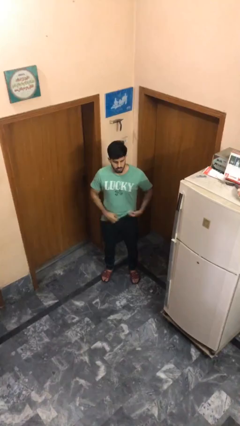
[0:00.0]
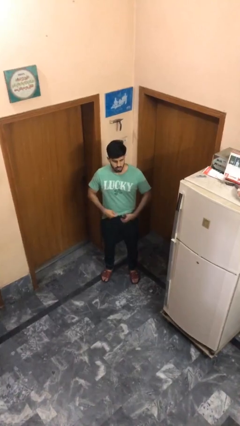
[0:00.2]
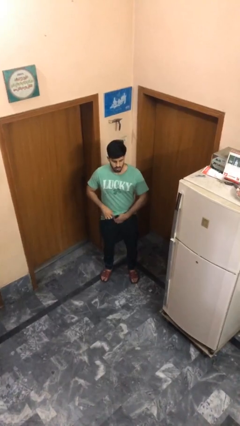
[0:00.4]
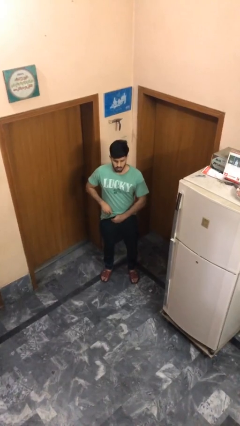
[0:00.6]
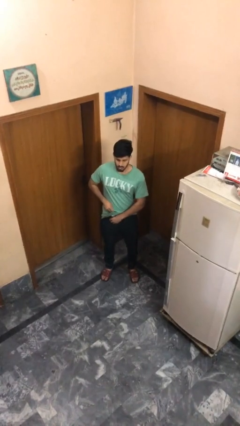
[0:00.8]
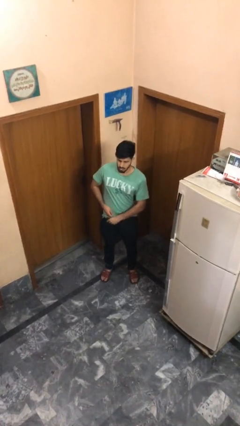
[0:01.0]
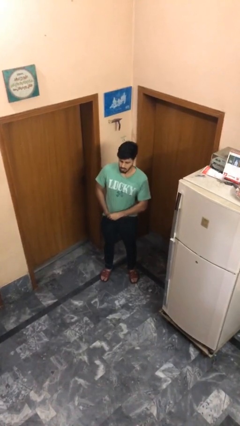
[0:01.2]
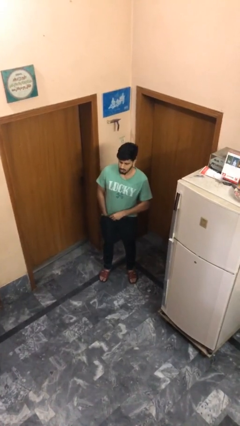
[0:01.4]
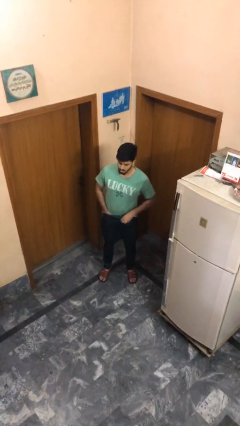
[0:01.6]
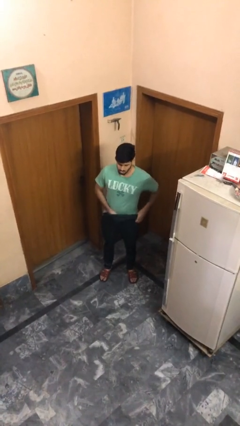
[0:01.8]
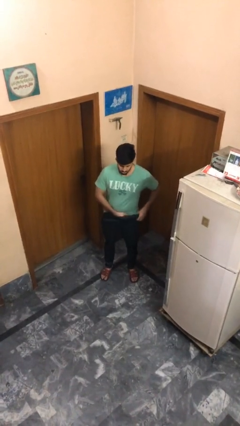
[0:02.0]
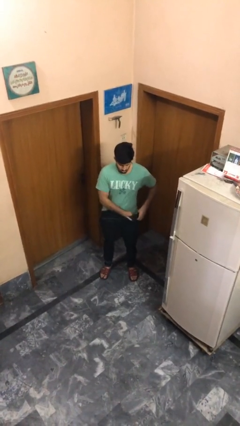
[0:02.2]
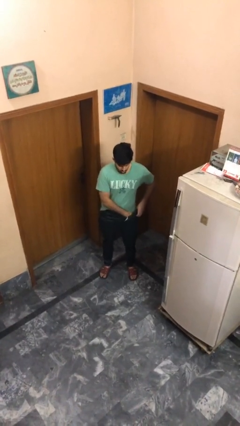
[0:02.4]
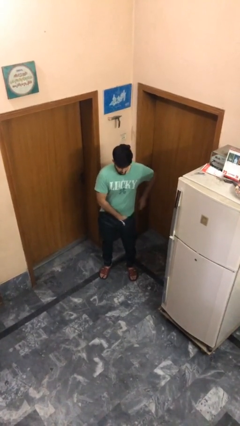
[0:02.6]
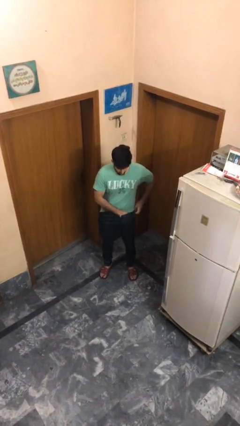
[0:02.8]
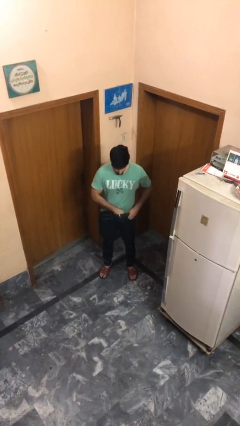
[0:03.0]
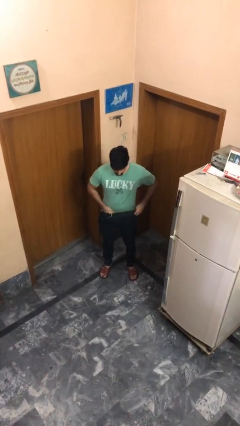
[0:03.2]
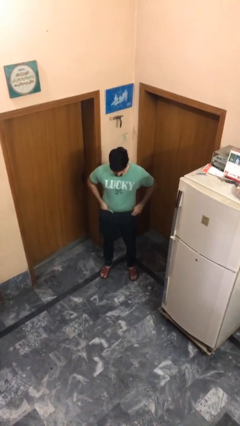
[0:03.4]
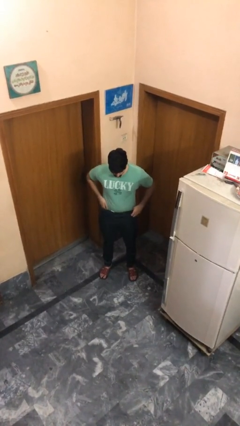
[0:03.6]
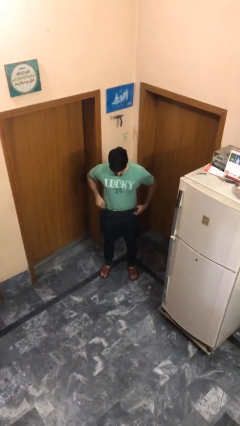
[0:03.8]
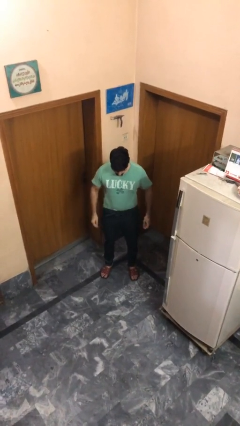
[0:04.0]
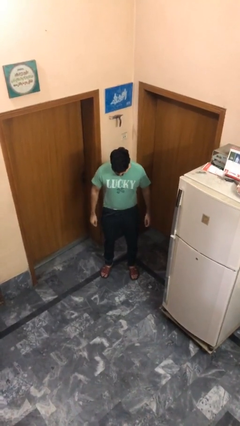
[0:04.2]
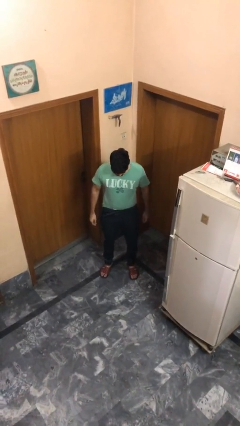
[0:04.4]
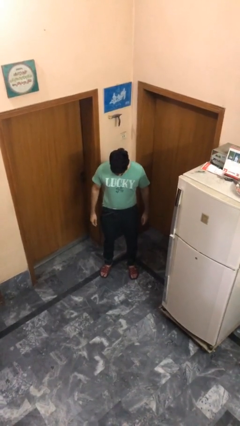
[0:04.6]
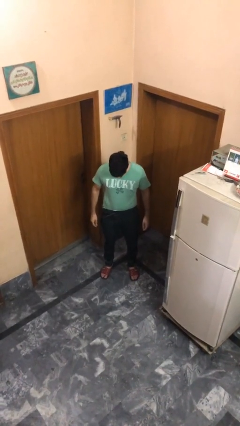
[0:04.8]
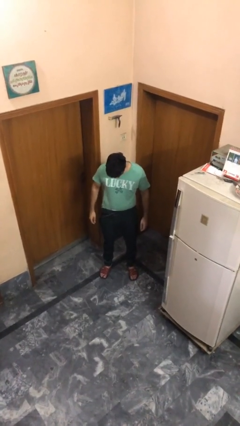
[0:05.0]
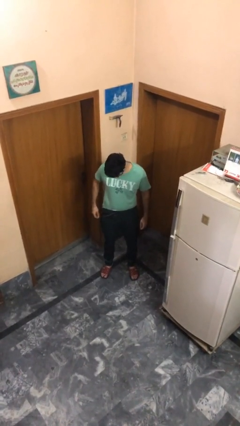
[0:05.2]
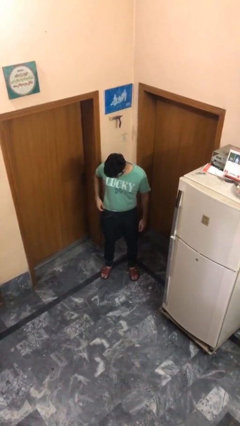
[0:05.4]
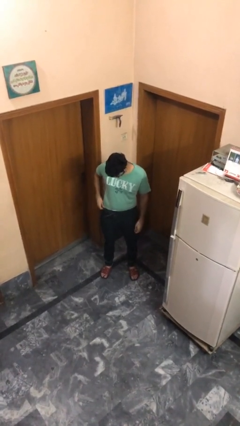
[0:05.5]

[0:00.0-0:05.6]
person tucks in shirt

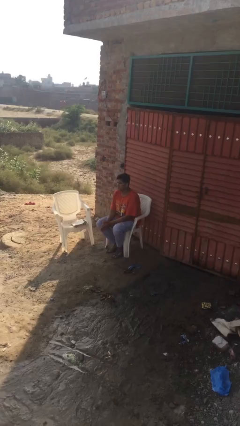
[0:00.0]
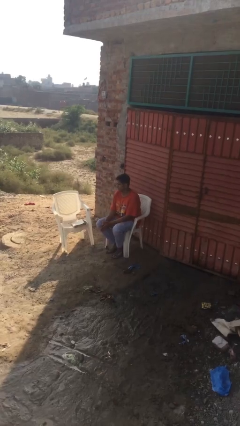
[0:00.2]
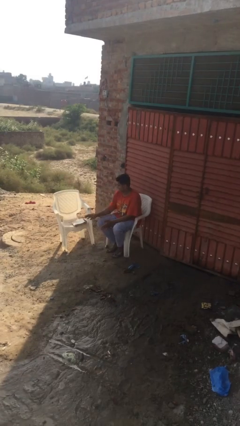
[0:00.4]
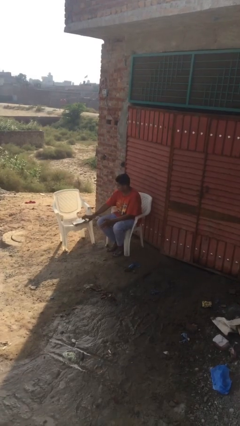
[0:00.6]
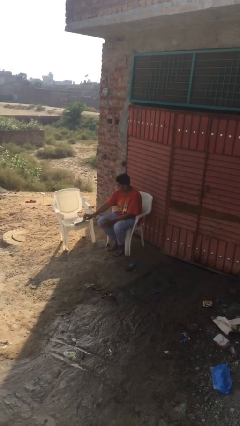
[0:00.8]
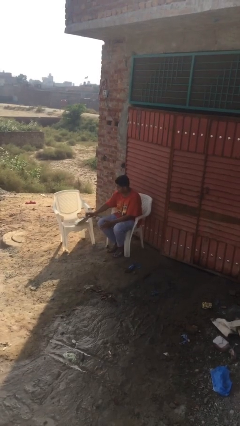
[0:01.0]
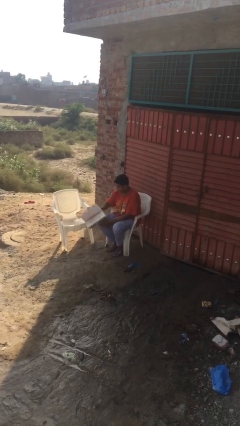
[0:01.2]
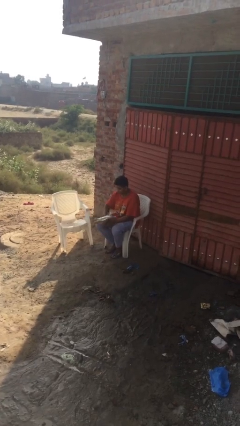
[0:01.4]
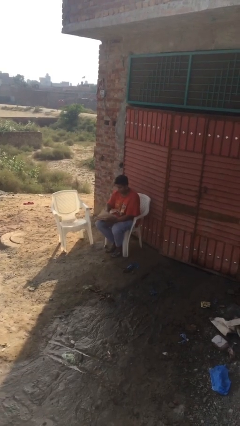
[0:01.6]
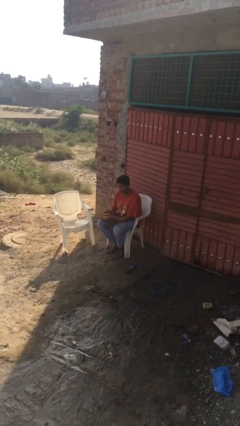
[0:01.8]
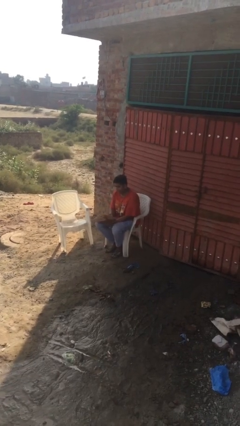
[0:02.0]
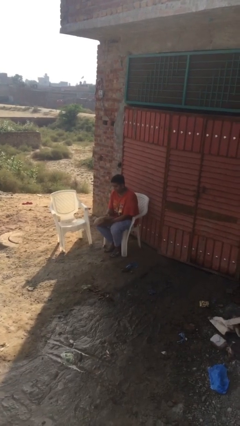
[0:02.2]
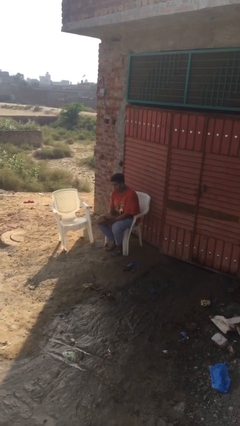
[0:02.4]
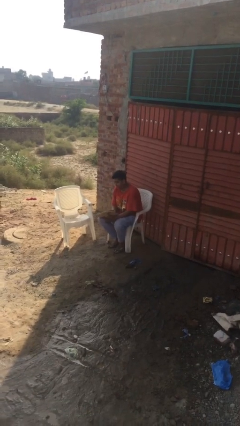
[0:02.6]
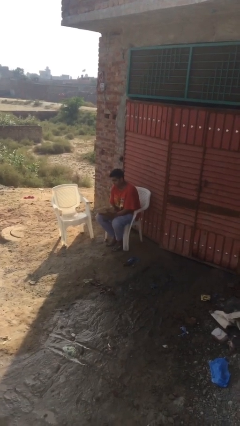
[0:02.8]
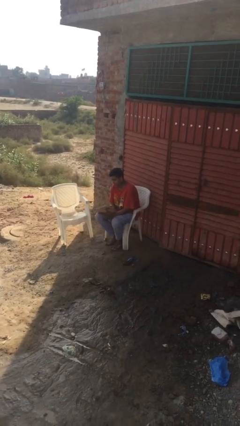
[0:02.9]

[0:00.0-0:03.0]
person picks up object from table

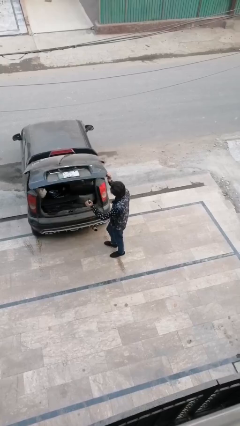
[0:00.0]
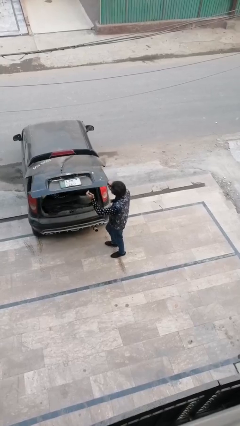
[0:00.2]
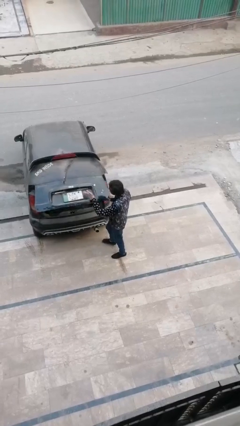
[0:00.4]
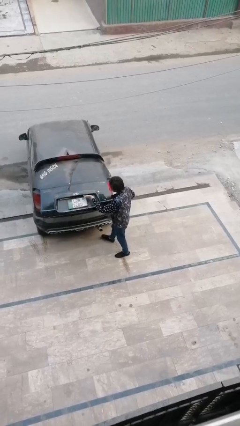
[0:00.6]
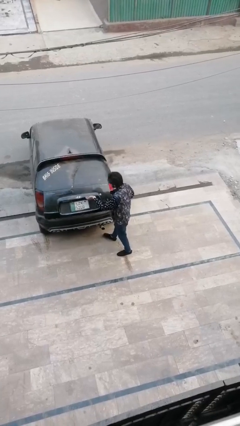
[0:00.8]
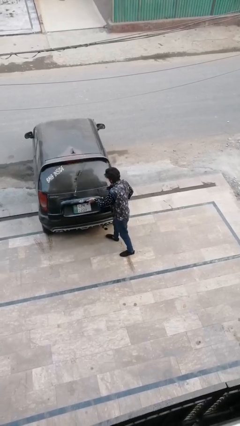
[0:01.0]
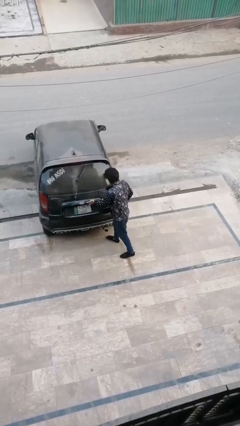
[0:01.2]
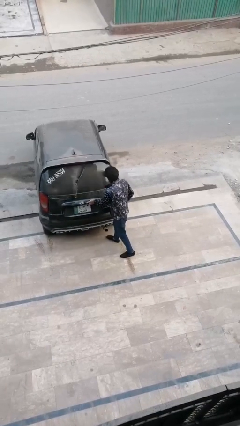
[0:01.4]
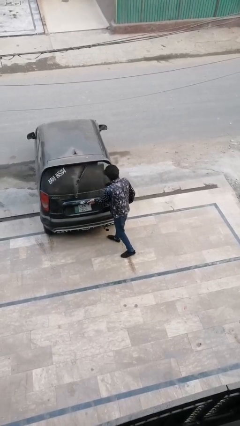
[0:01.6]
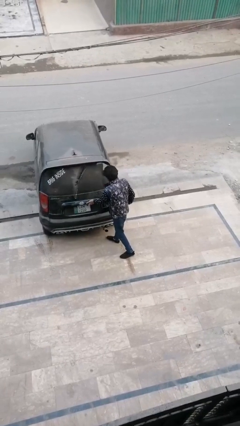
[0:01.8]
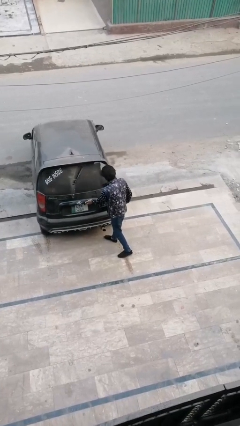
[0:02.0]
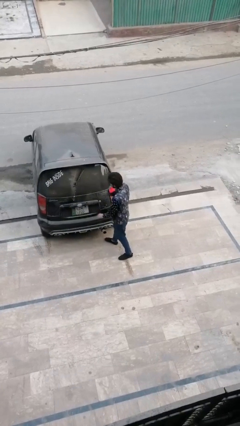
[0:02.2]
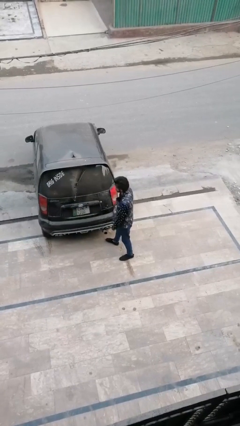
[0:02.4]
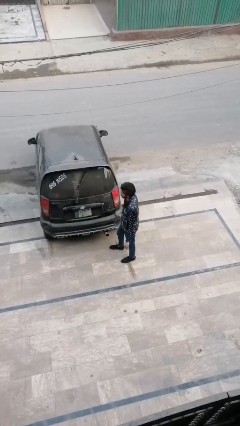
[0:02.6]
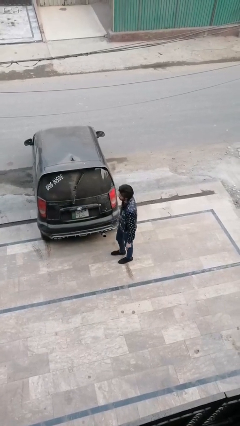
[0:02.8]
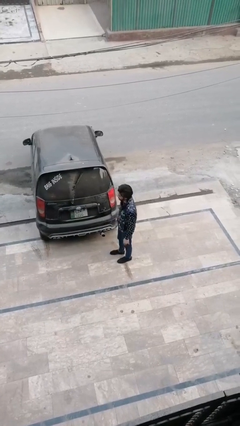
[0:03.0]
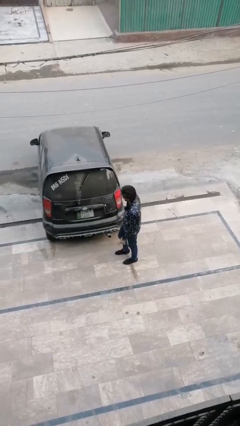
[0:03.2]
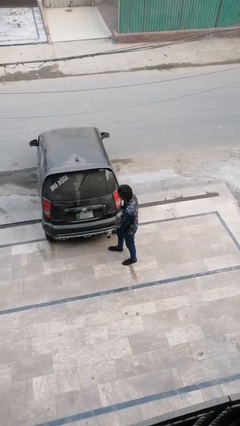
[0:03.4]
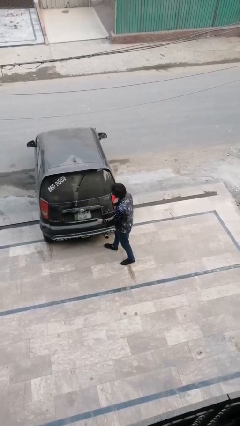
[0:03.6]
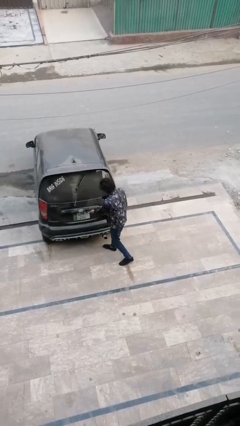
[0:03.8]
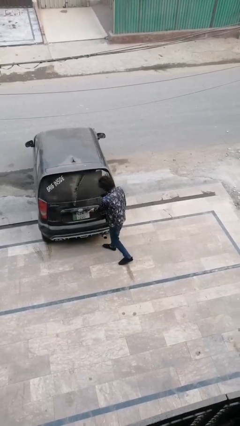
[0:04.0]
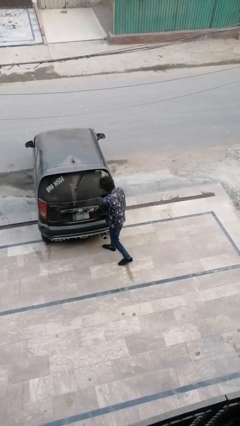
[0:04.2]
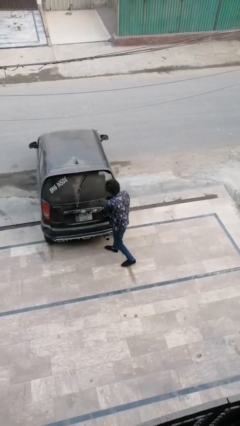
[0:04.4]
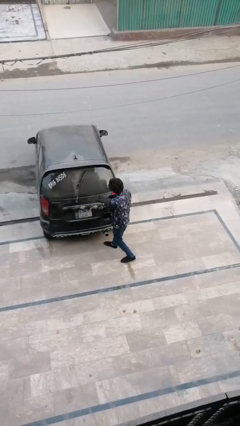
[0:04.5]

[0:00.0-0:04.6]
person closes car trunk

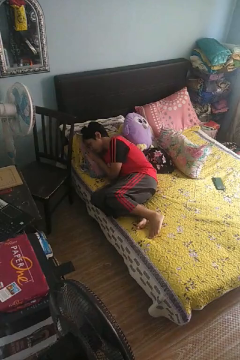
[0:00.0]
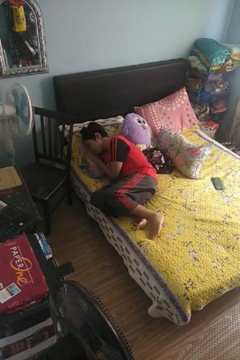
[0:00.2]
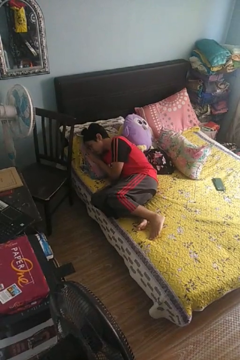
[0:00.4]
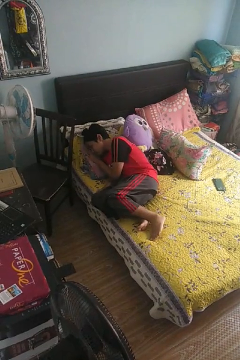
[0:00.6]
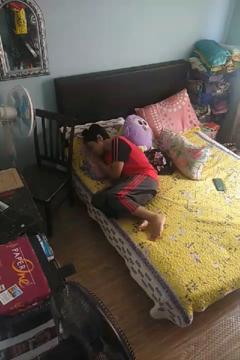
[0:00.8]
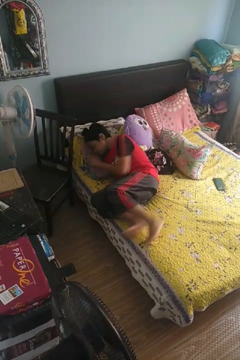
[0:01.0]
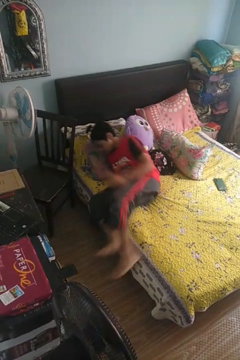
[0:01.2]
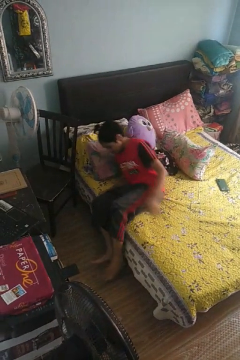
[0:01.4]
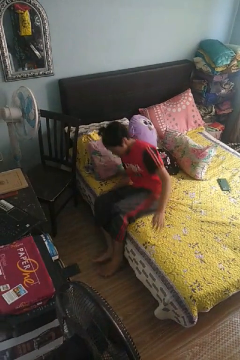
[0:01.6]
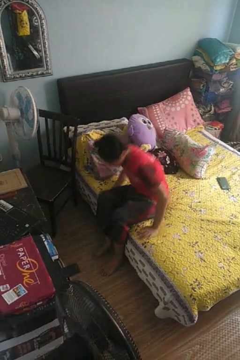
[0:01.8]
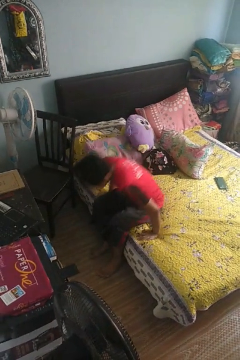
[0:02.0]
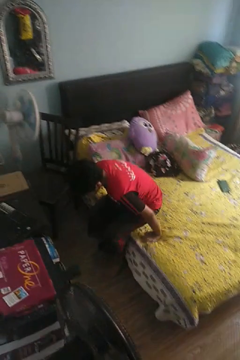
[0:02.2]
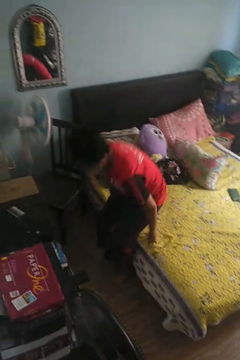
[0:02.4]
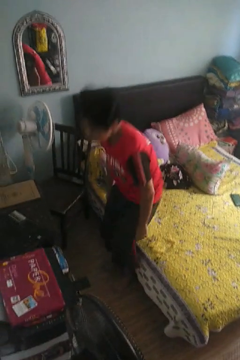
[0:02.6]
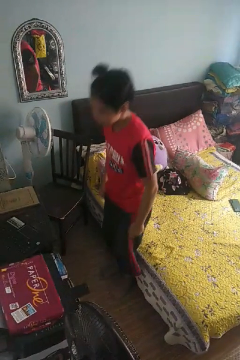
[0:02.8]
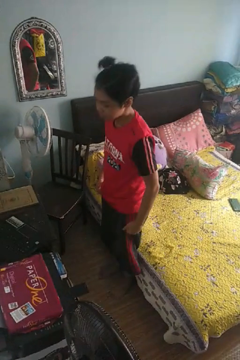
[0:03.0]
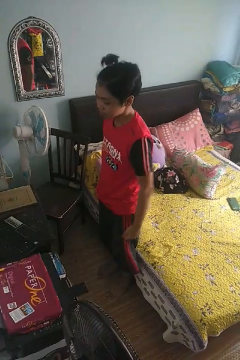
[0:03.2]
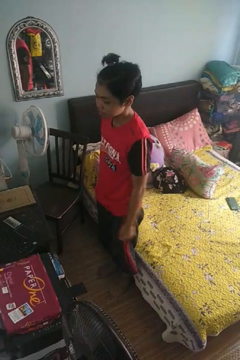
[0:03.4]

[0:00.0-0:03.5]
person stands up

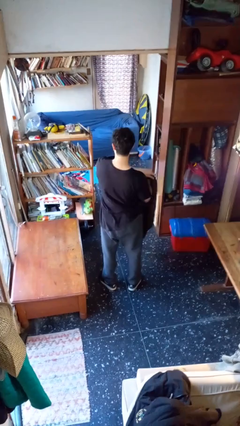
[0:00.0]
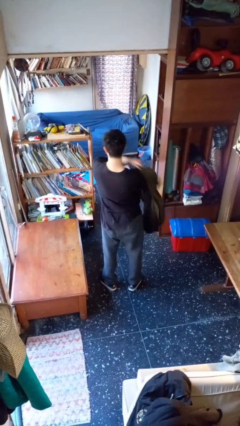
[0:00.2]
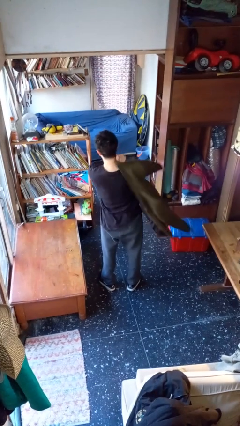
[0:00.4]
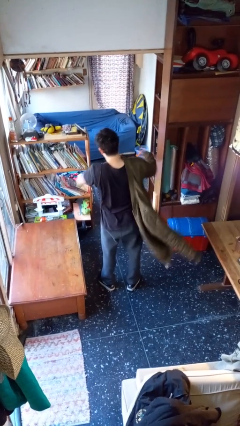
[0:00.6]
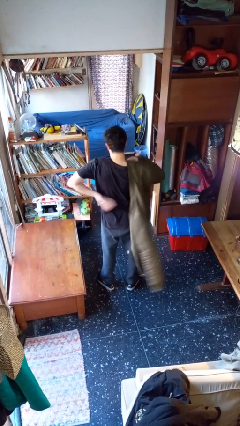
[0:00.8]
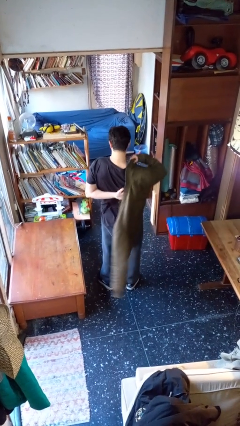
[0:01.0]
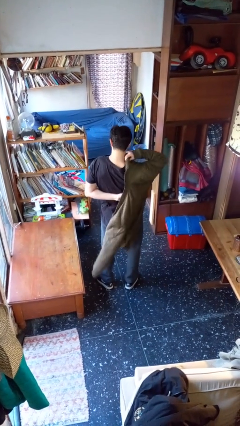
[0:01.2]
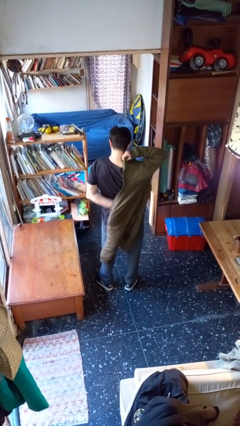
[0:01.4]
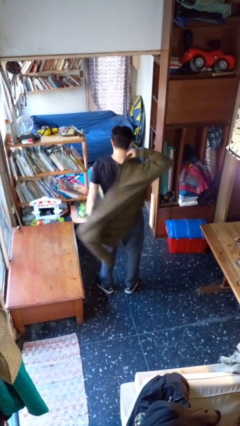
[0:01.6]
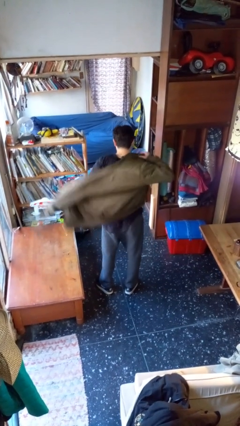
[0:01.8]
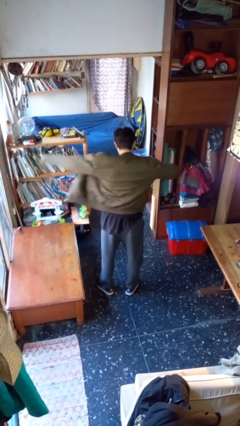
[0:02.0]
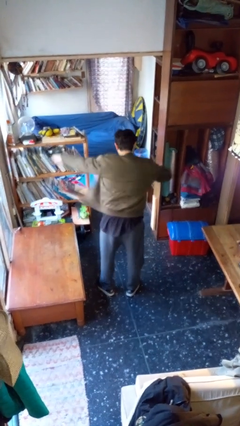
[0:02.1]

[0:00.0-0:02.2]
person puts on jacket
